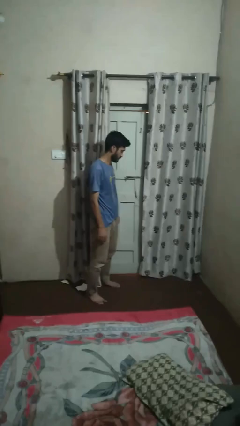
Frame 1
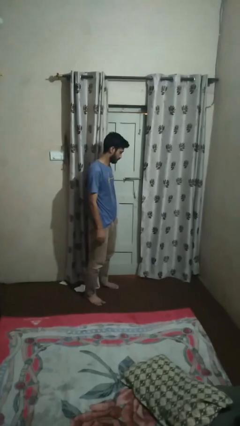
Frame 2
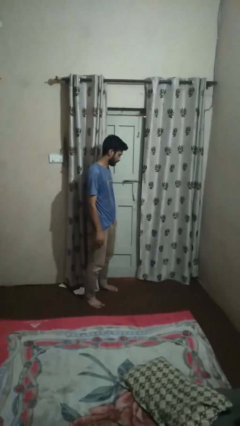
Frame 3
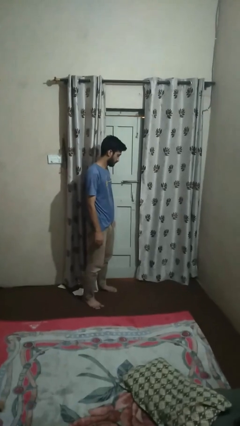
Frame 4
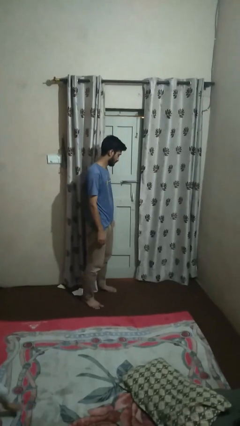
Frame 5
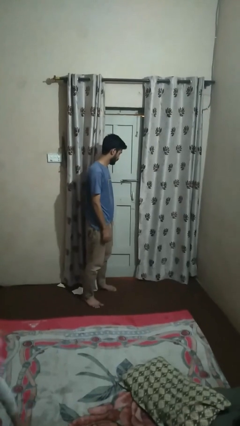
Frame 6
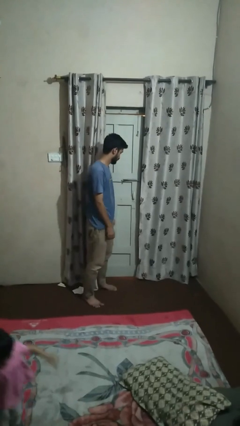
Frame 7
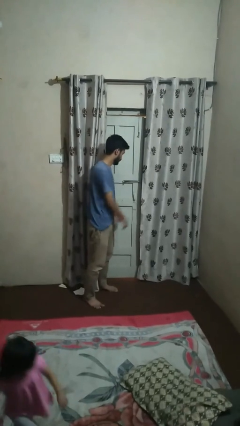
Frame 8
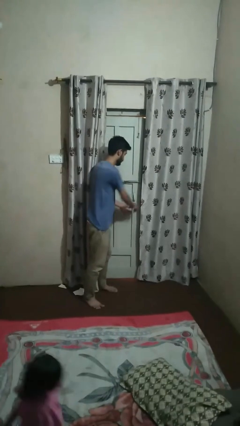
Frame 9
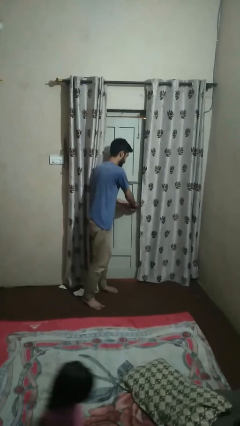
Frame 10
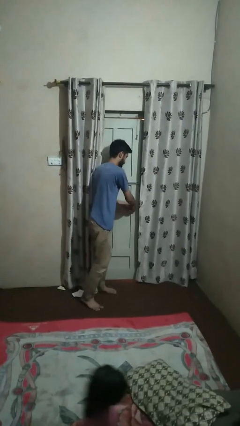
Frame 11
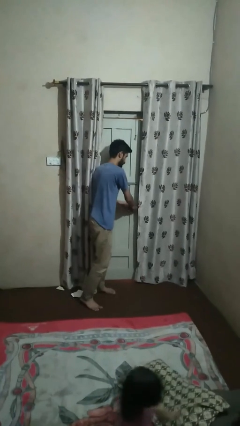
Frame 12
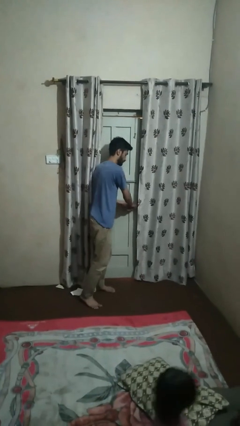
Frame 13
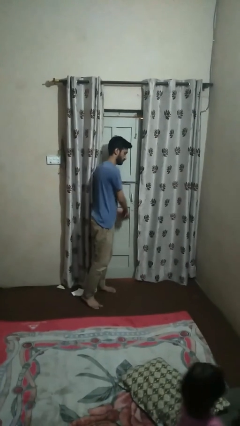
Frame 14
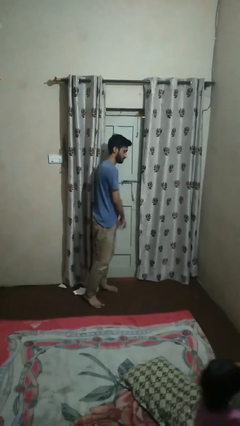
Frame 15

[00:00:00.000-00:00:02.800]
person locks door with keys

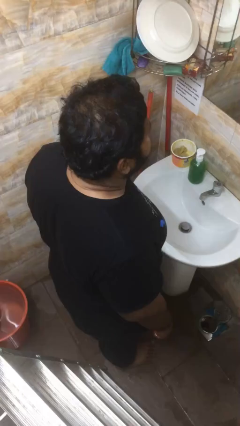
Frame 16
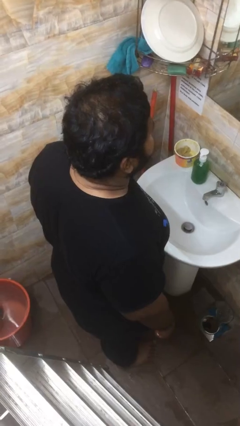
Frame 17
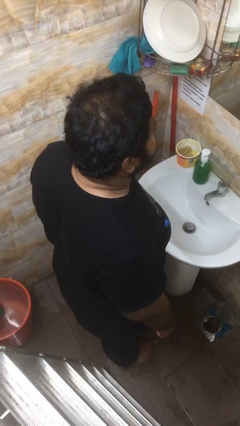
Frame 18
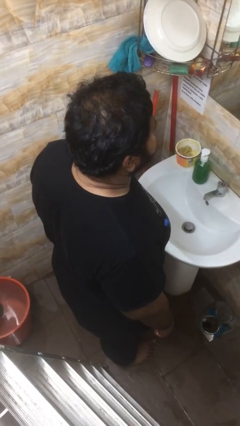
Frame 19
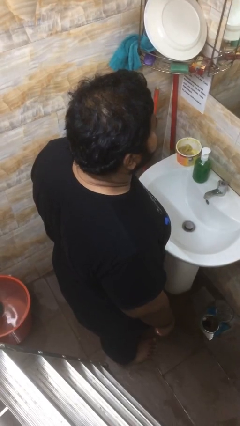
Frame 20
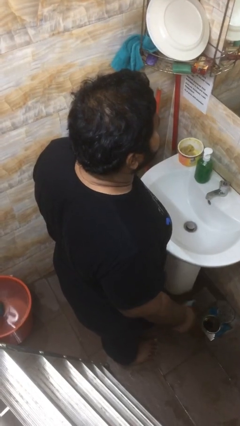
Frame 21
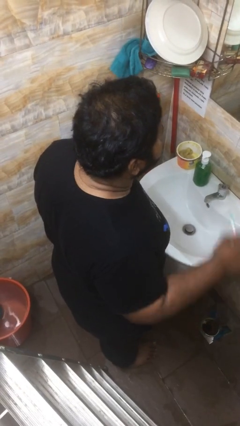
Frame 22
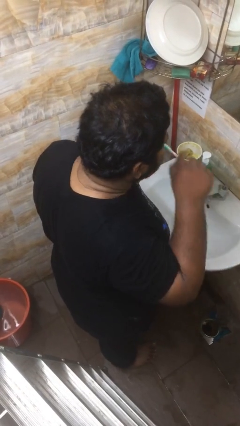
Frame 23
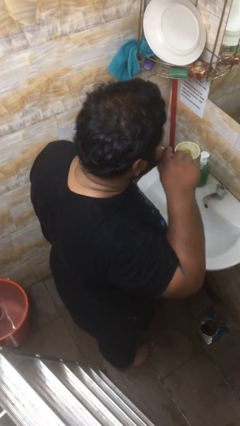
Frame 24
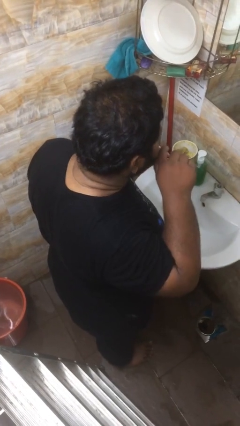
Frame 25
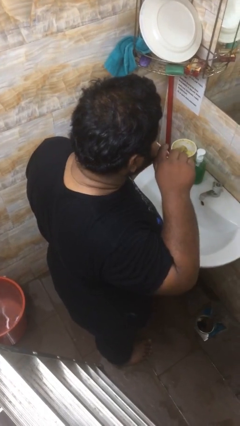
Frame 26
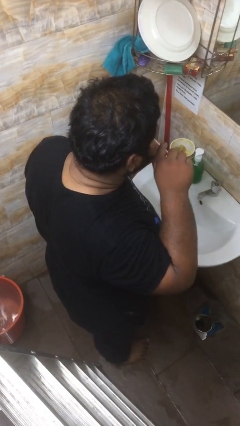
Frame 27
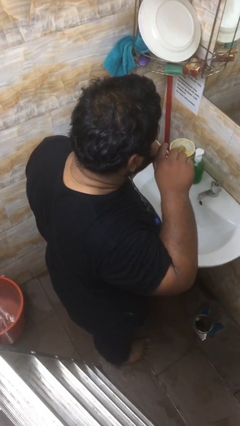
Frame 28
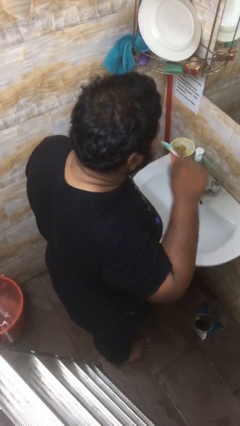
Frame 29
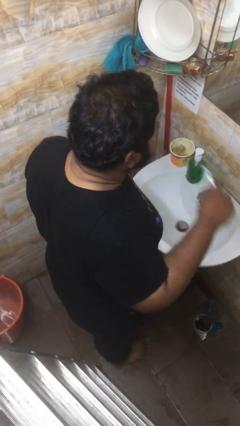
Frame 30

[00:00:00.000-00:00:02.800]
person brushes teeth

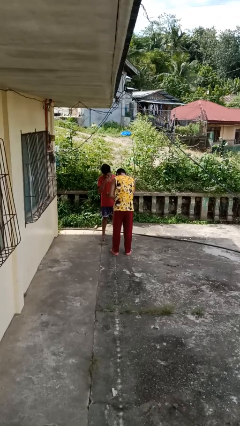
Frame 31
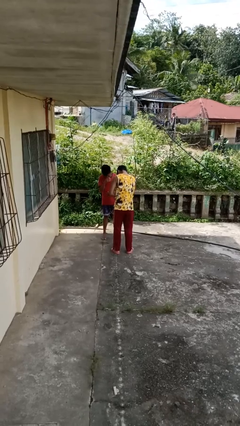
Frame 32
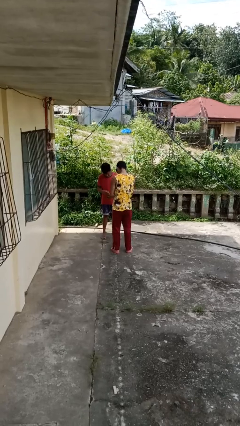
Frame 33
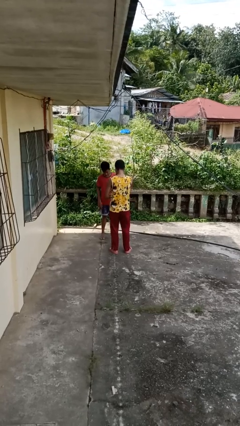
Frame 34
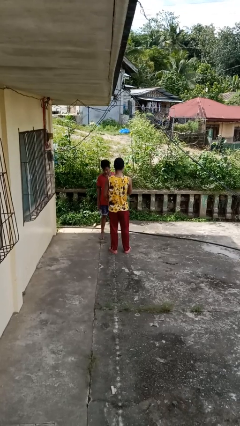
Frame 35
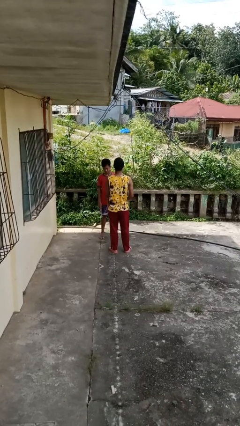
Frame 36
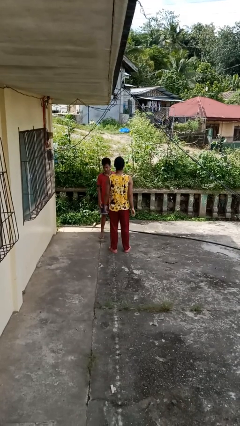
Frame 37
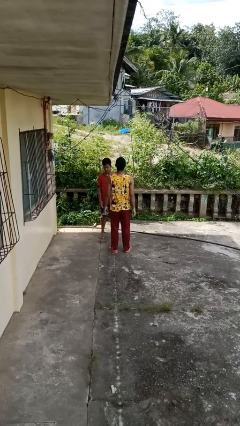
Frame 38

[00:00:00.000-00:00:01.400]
person laughs with person

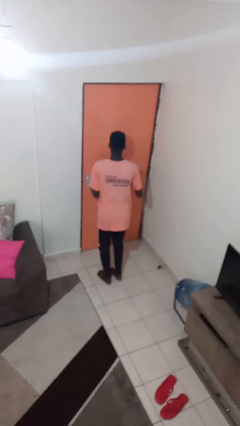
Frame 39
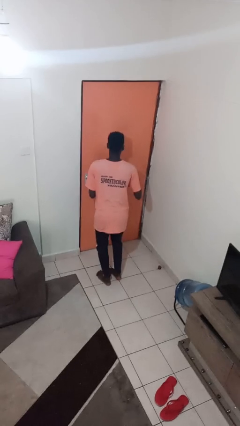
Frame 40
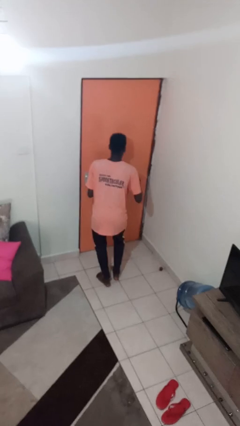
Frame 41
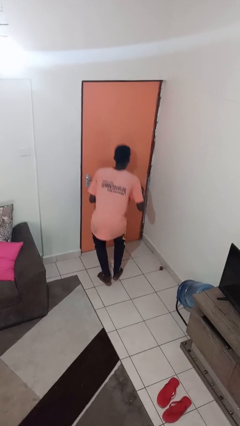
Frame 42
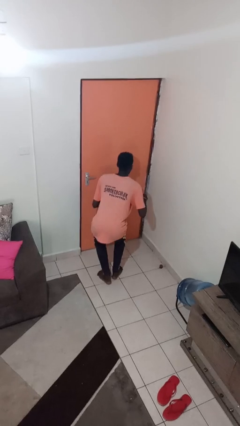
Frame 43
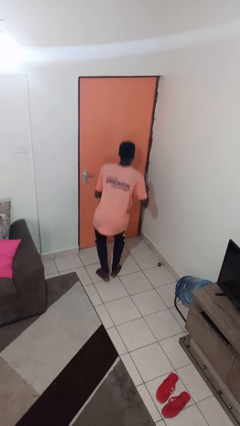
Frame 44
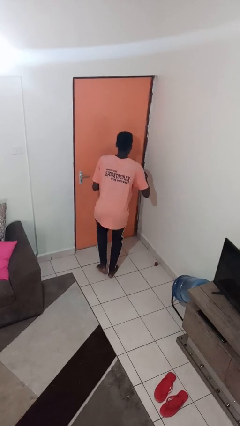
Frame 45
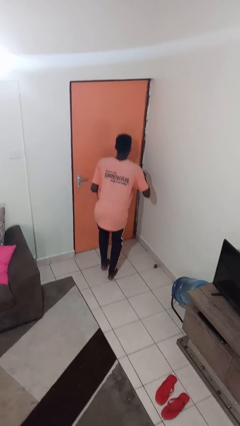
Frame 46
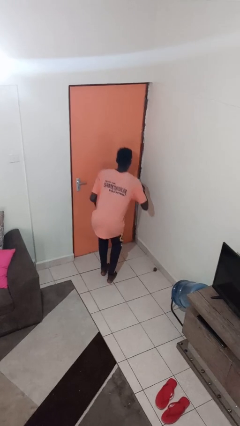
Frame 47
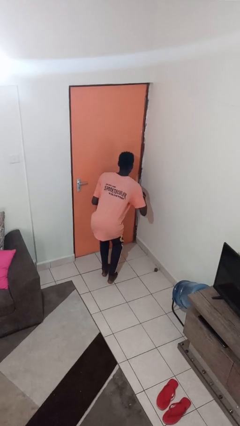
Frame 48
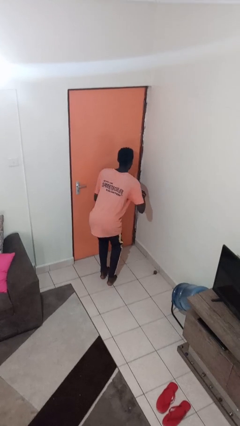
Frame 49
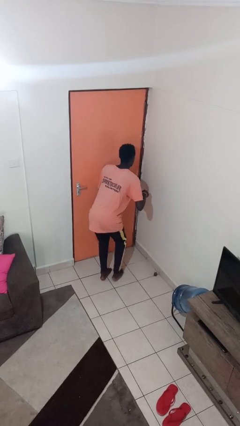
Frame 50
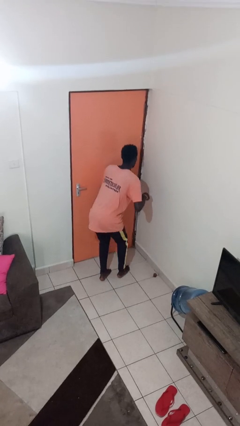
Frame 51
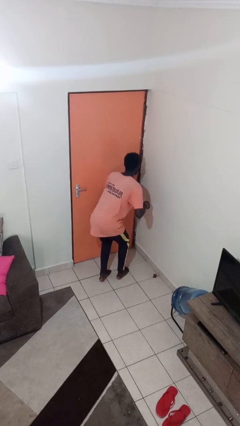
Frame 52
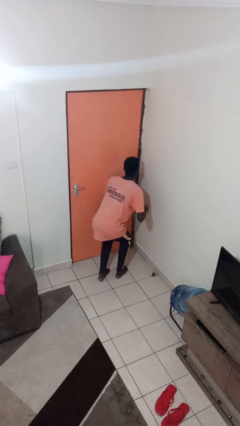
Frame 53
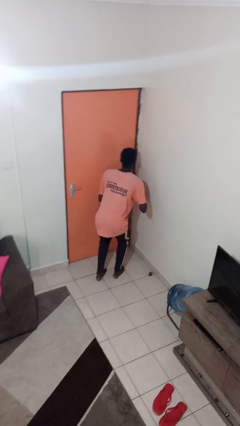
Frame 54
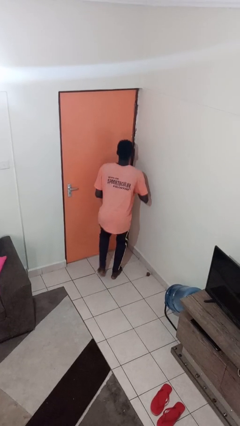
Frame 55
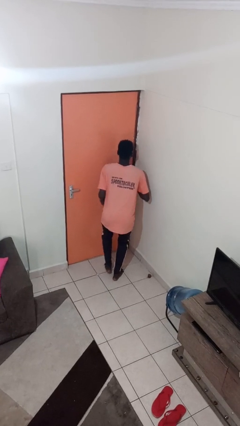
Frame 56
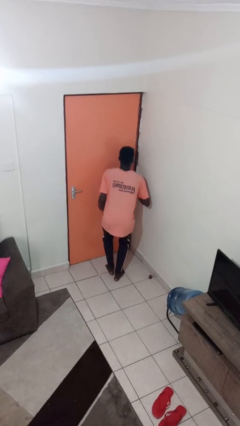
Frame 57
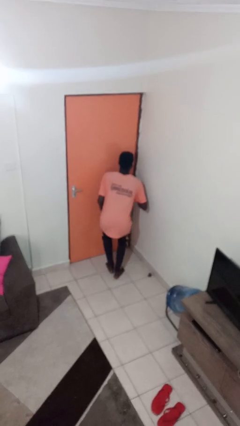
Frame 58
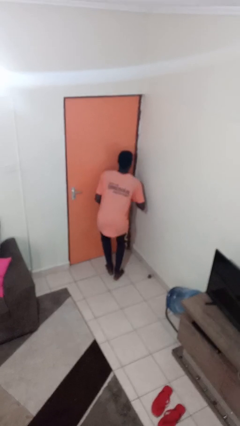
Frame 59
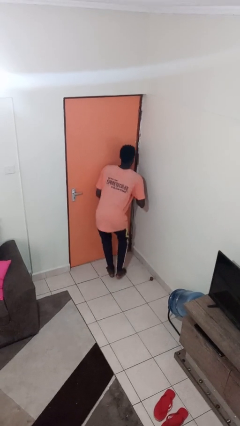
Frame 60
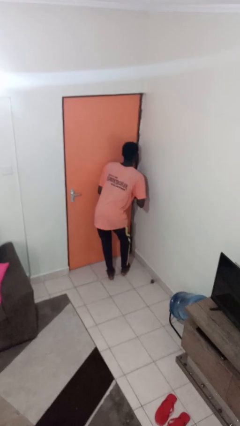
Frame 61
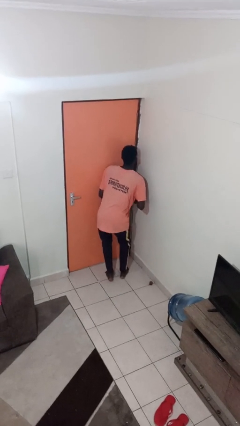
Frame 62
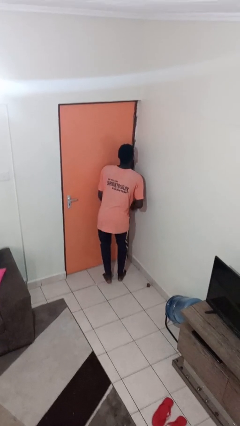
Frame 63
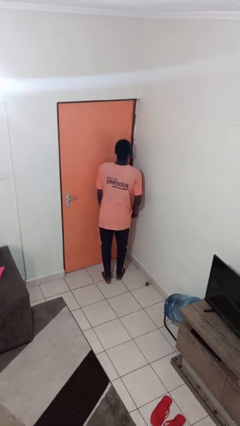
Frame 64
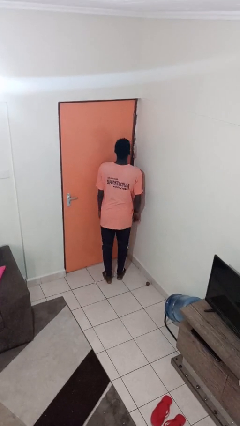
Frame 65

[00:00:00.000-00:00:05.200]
person walks tiptoe

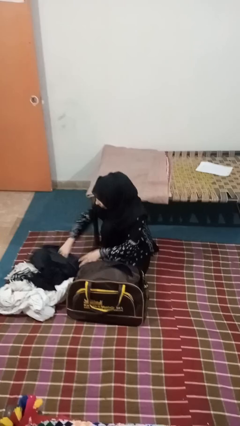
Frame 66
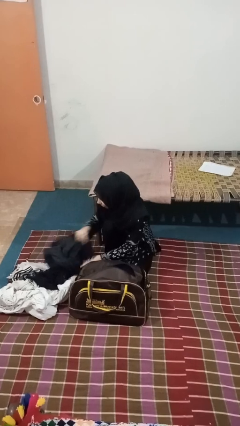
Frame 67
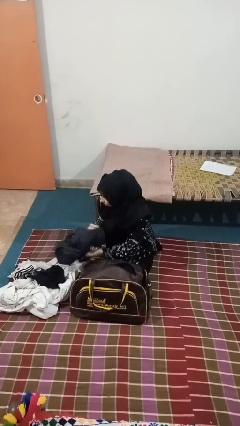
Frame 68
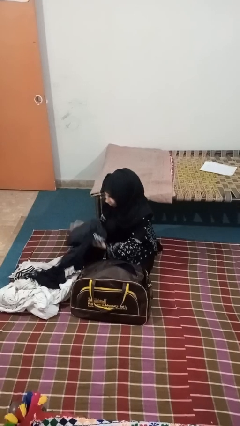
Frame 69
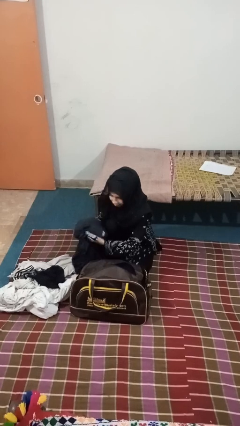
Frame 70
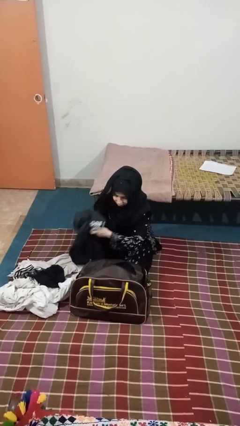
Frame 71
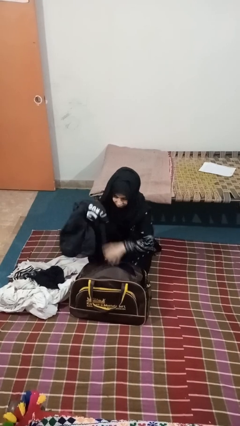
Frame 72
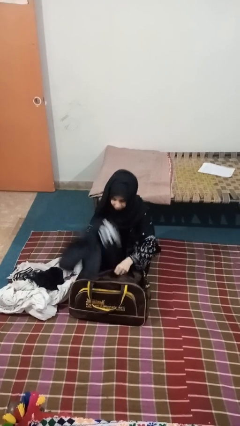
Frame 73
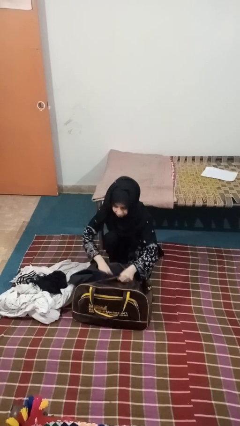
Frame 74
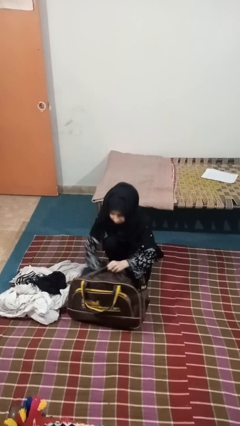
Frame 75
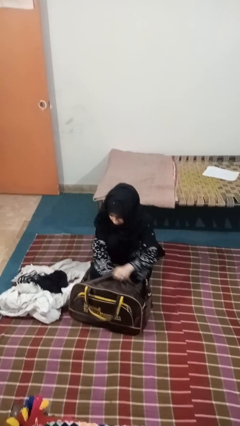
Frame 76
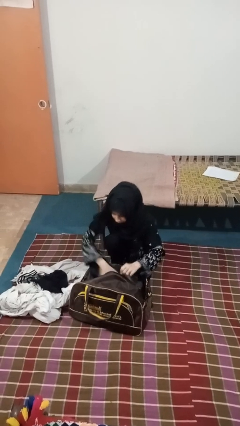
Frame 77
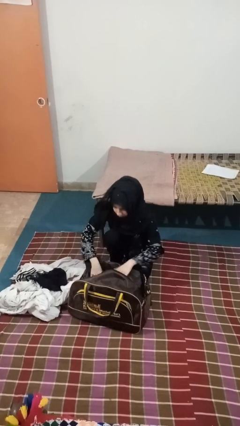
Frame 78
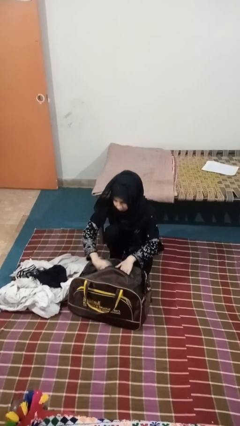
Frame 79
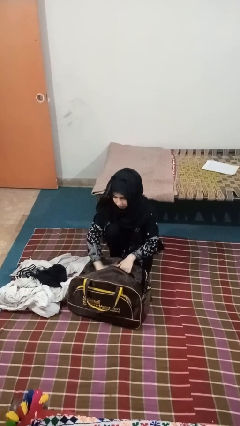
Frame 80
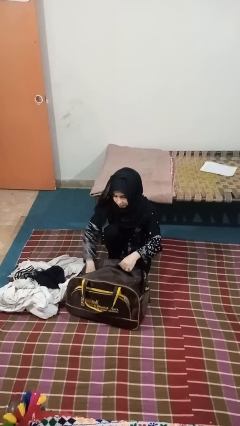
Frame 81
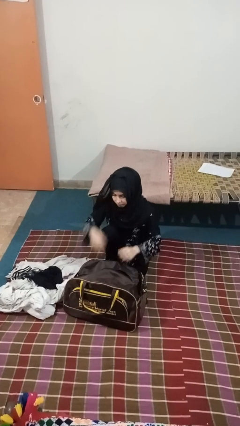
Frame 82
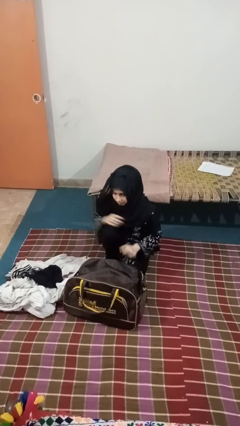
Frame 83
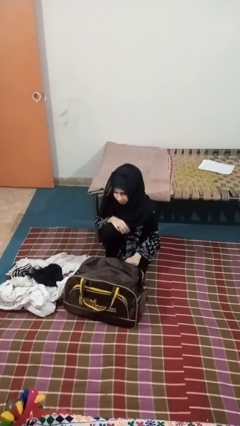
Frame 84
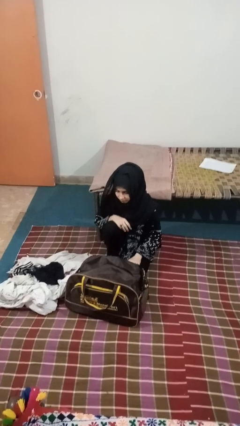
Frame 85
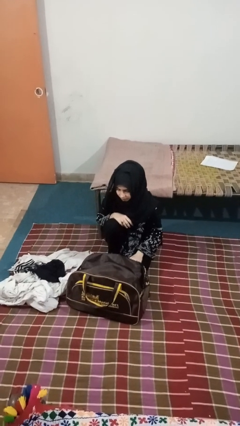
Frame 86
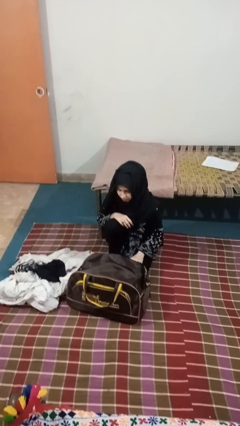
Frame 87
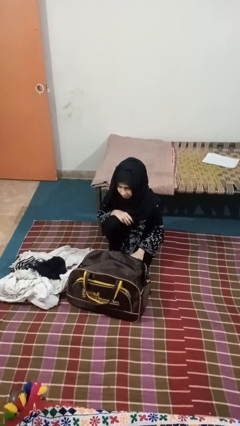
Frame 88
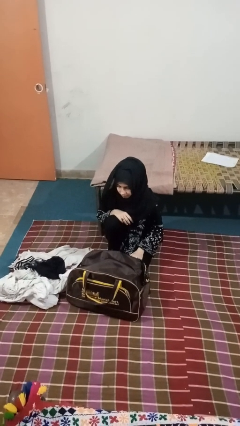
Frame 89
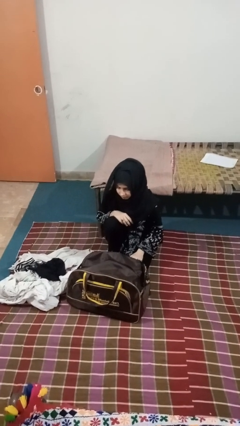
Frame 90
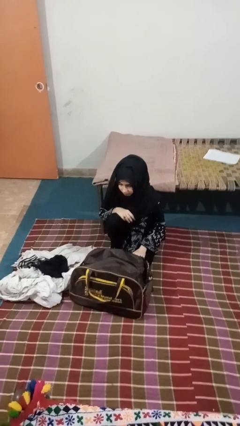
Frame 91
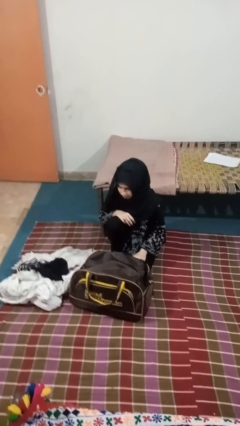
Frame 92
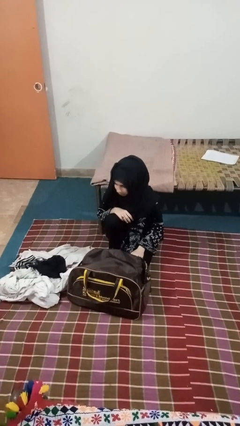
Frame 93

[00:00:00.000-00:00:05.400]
person loads clothes into suitcase
